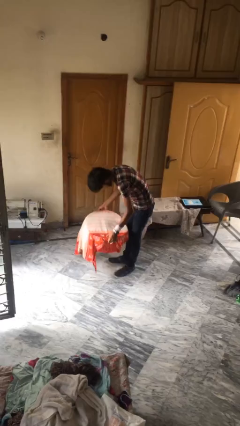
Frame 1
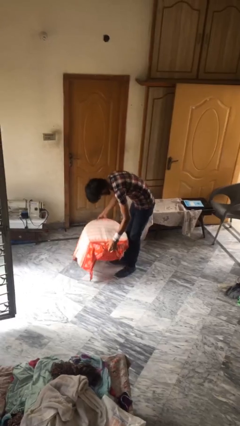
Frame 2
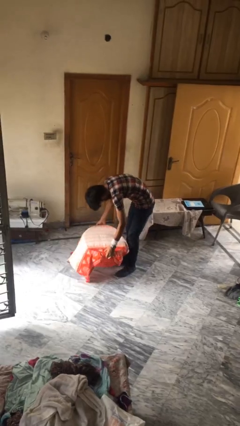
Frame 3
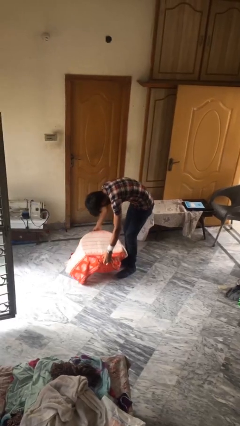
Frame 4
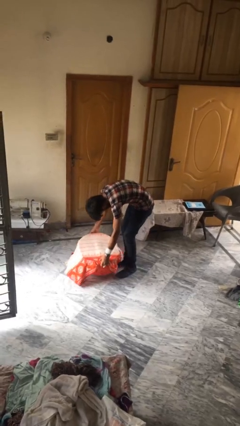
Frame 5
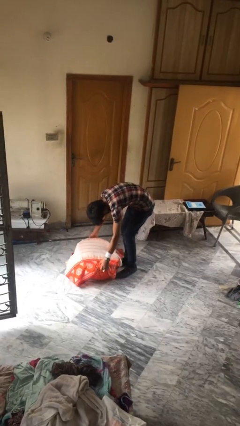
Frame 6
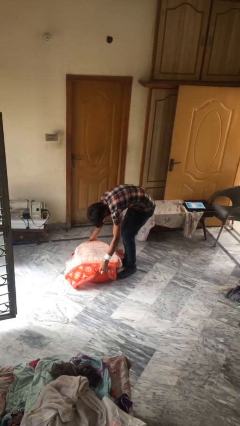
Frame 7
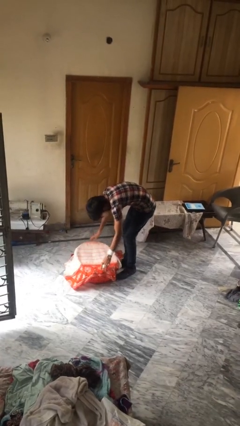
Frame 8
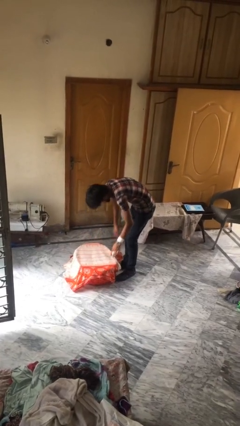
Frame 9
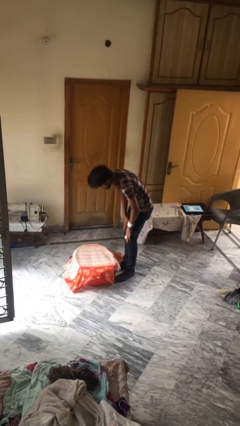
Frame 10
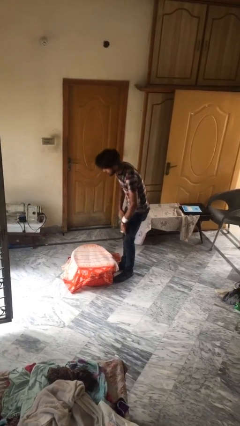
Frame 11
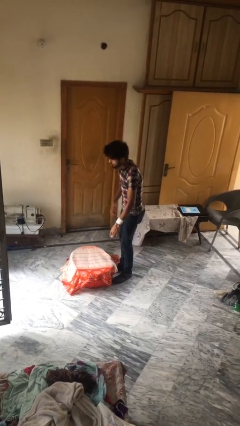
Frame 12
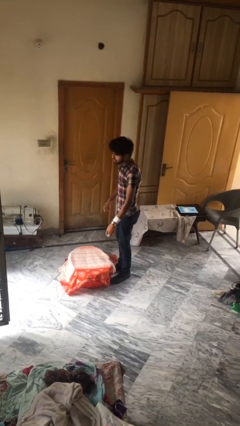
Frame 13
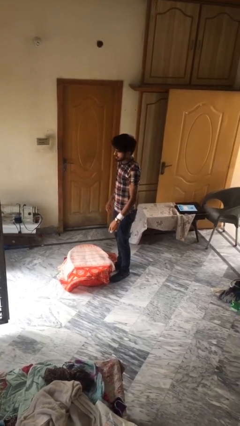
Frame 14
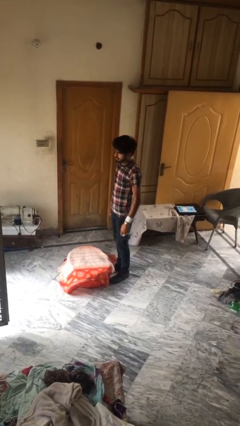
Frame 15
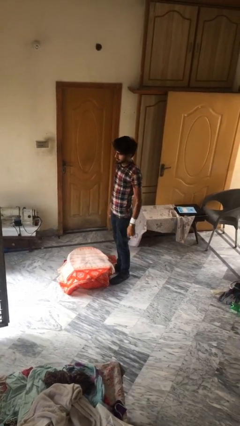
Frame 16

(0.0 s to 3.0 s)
person puts down object on floor

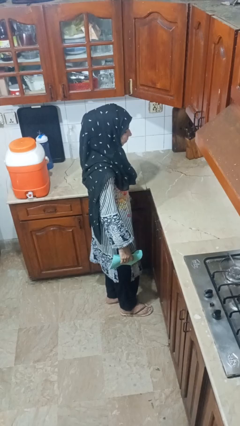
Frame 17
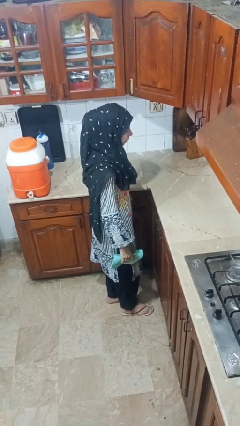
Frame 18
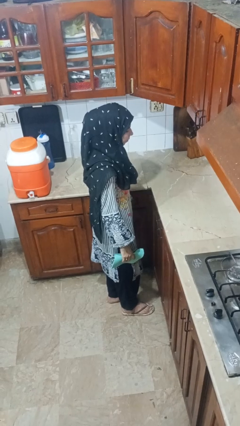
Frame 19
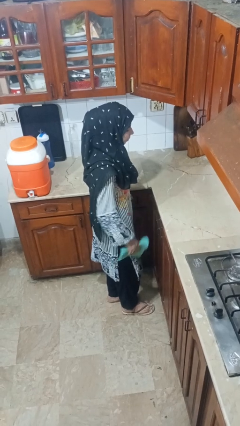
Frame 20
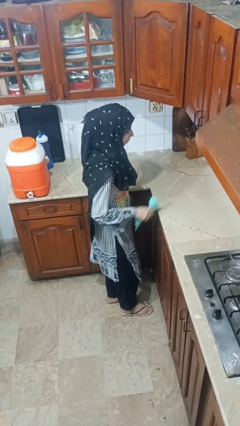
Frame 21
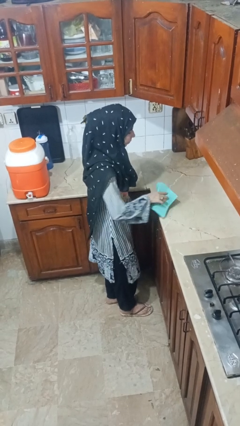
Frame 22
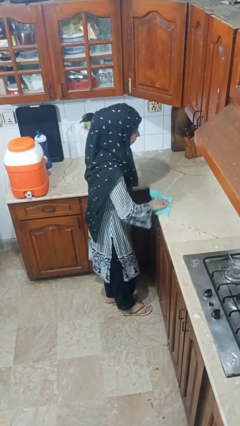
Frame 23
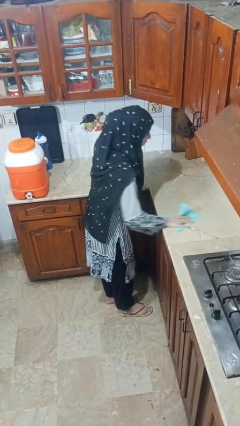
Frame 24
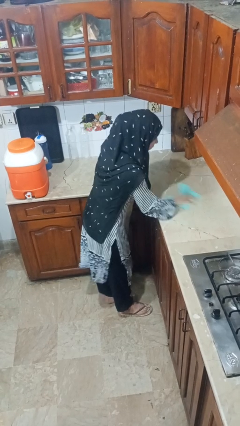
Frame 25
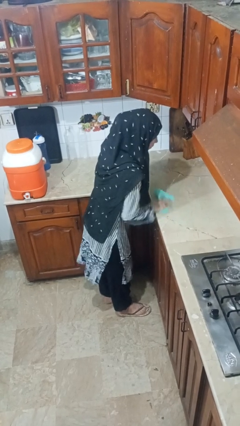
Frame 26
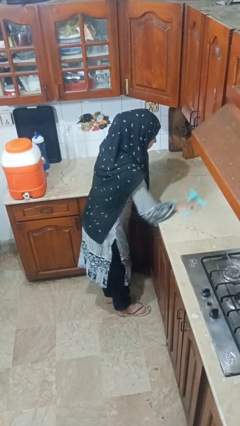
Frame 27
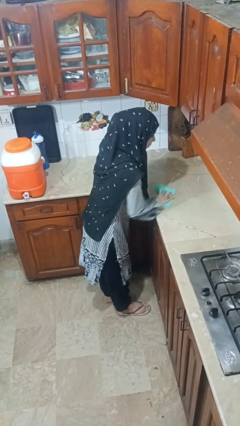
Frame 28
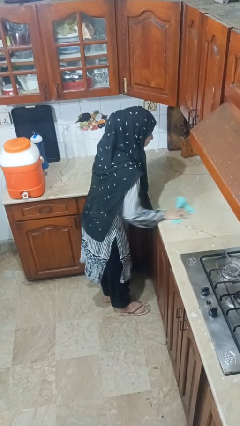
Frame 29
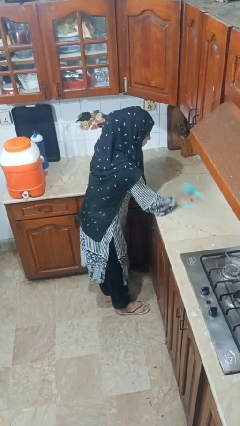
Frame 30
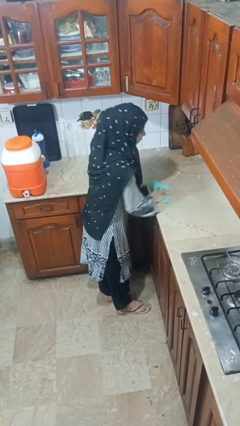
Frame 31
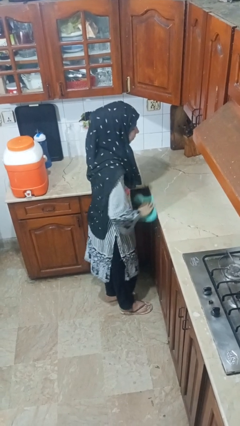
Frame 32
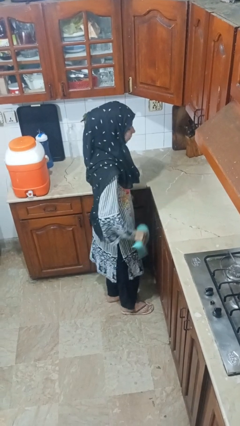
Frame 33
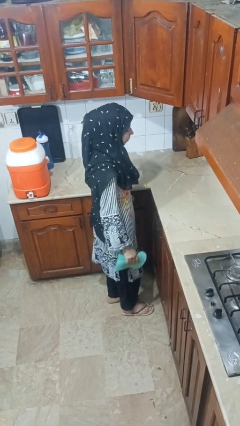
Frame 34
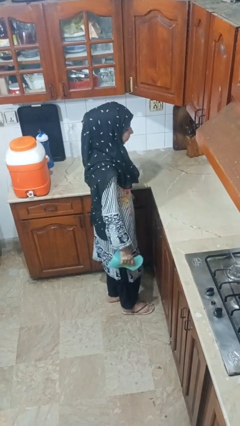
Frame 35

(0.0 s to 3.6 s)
person cleans table with rag

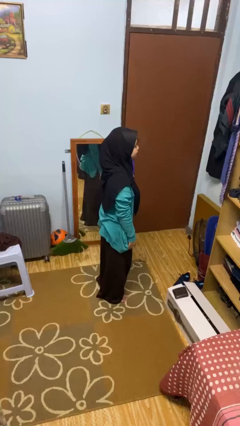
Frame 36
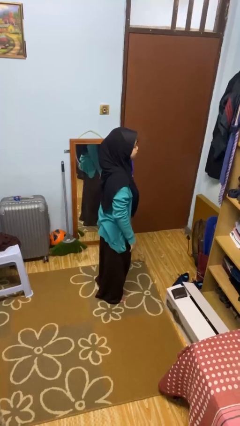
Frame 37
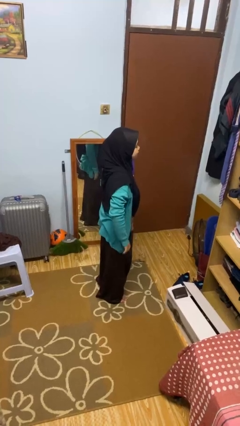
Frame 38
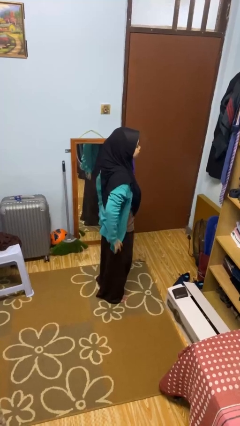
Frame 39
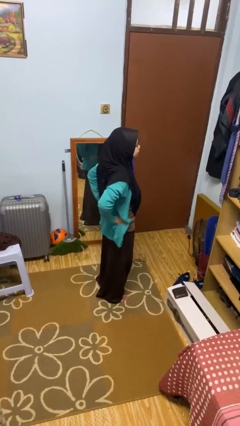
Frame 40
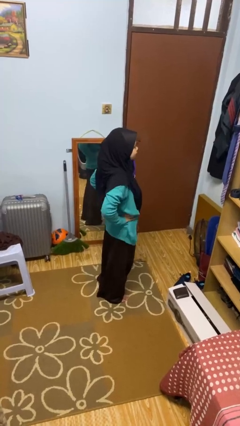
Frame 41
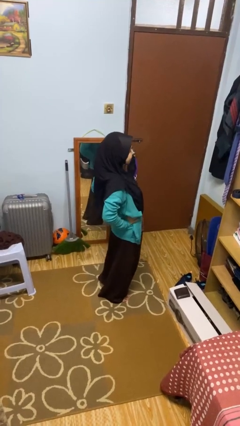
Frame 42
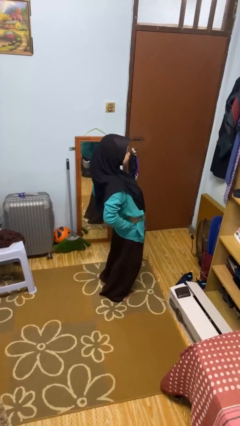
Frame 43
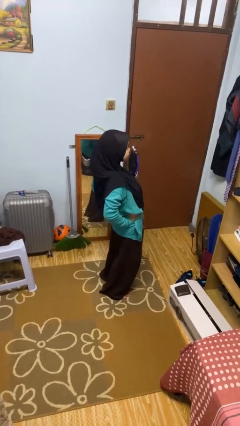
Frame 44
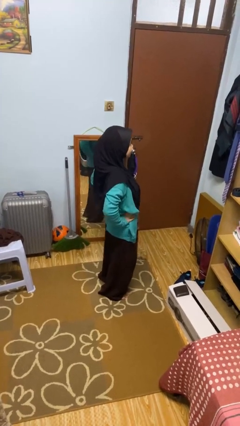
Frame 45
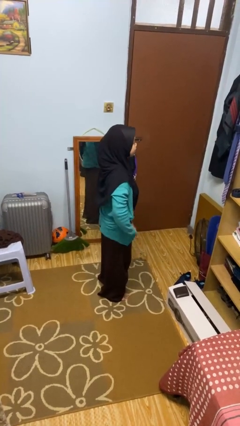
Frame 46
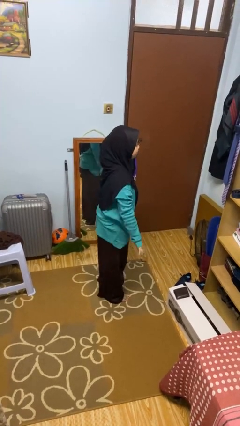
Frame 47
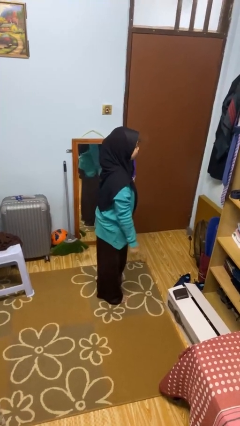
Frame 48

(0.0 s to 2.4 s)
person stretches back

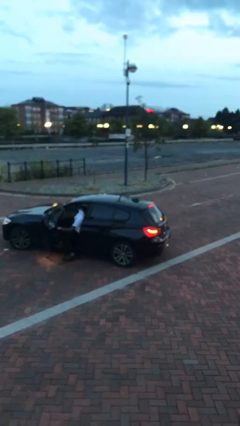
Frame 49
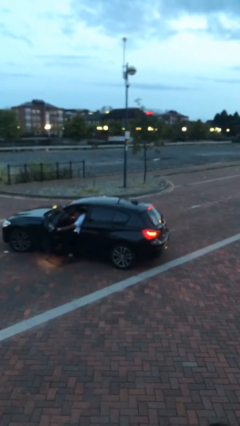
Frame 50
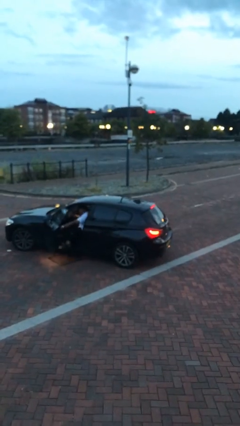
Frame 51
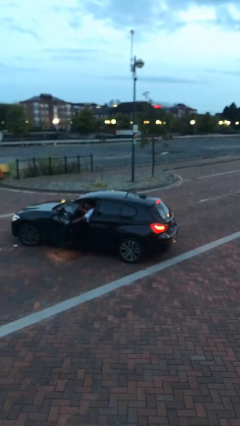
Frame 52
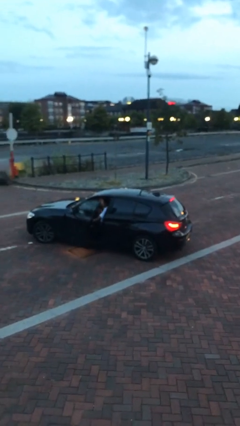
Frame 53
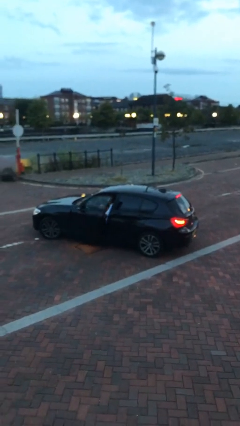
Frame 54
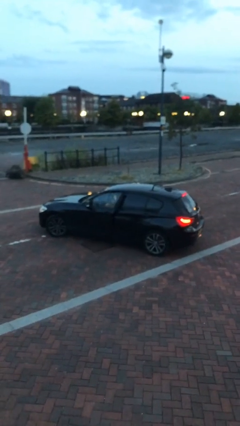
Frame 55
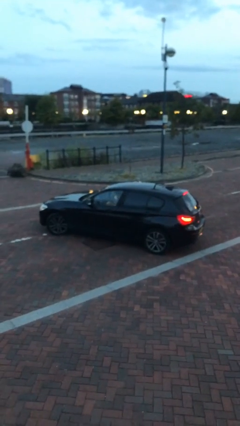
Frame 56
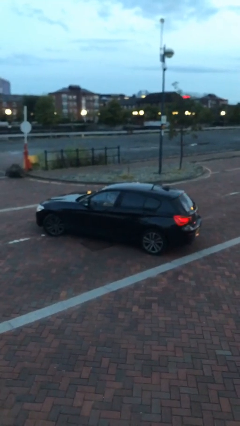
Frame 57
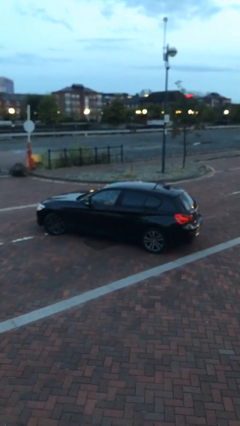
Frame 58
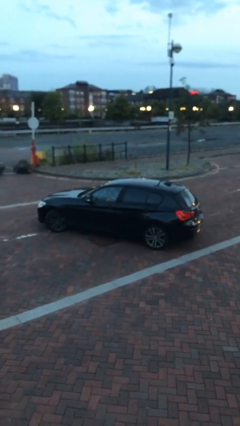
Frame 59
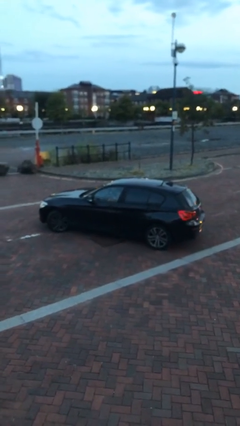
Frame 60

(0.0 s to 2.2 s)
car picks up person

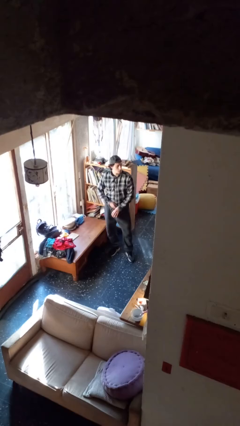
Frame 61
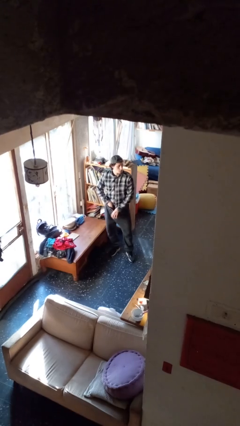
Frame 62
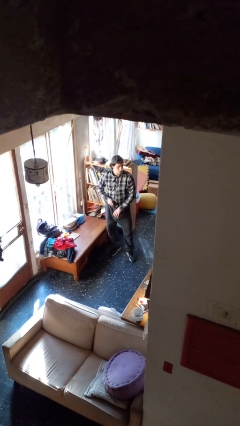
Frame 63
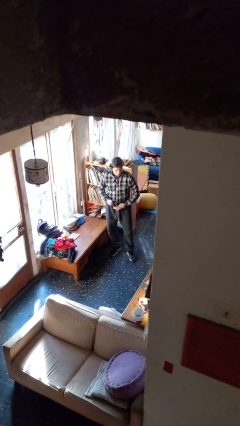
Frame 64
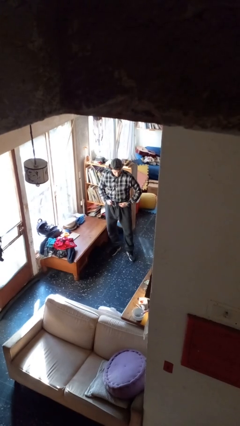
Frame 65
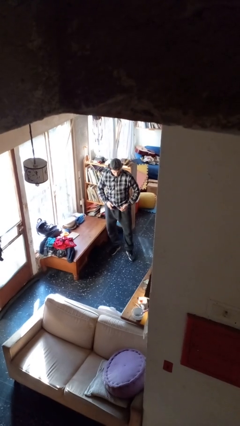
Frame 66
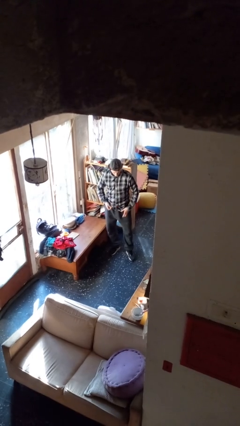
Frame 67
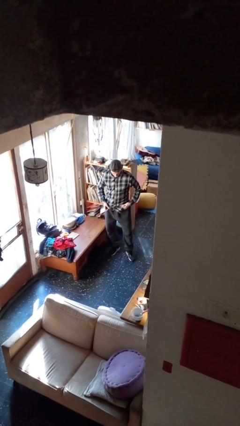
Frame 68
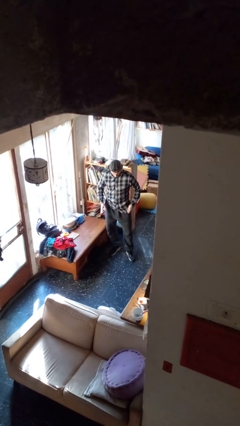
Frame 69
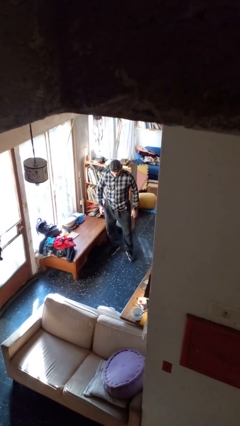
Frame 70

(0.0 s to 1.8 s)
person untucks shirt

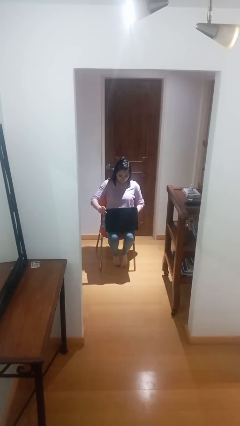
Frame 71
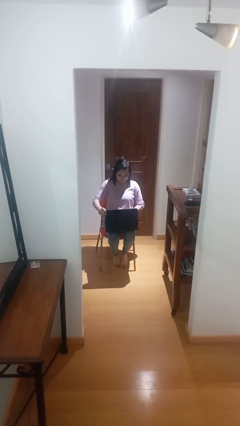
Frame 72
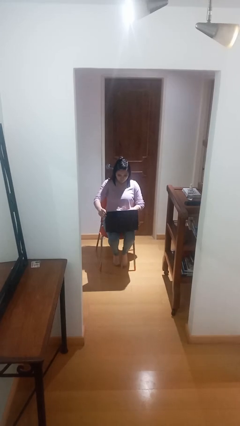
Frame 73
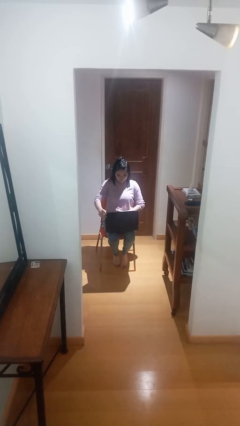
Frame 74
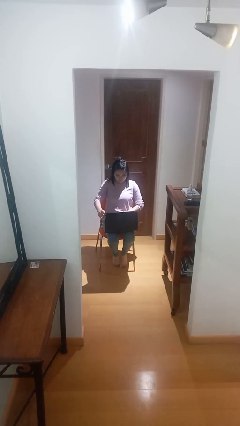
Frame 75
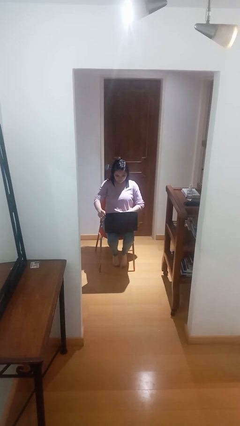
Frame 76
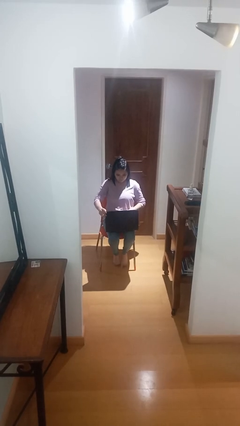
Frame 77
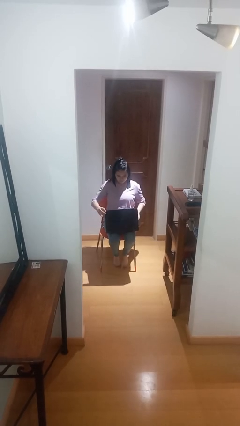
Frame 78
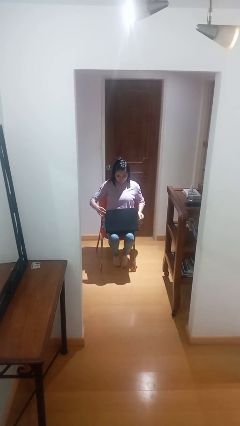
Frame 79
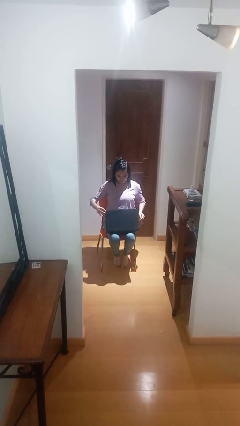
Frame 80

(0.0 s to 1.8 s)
person interacts with laptop

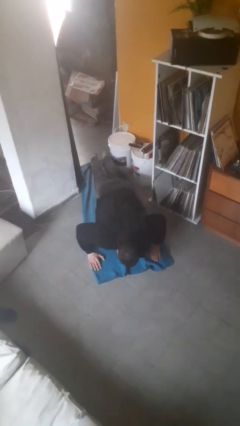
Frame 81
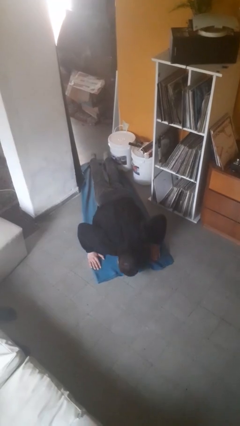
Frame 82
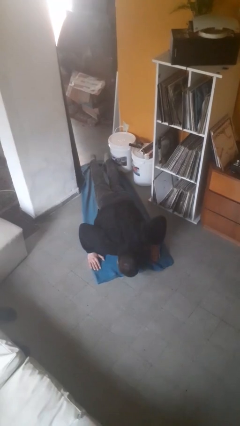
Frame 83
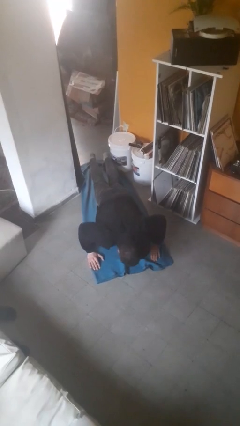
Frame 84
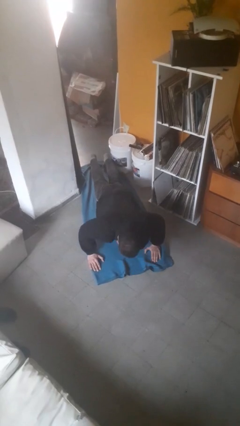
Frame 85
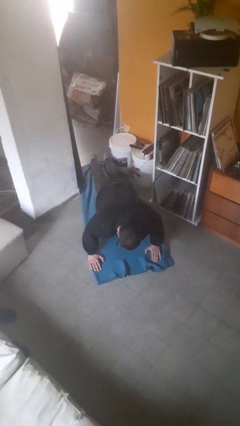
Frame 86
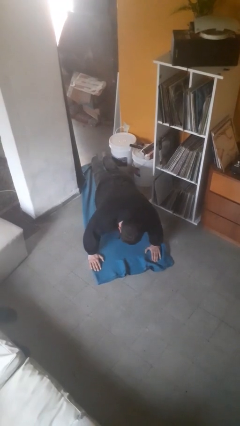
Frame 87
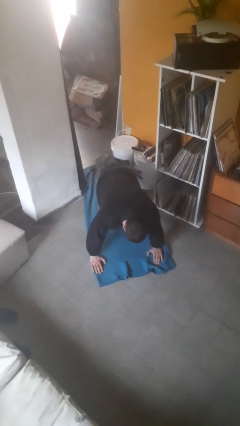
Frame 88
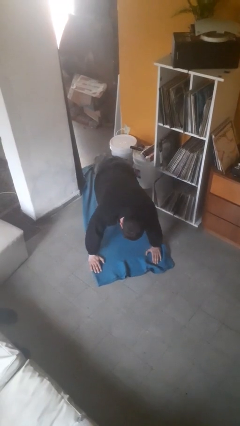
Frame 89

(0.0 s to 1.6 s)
person exercises with pushup

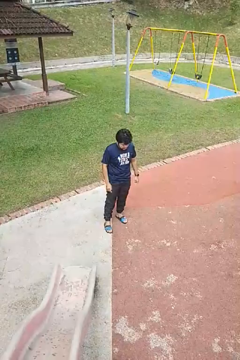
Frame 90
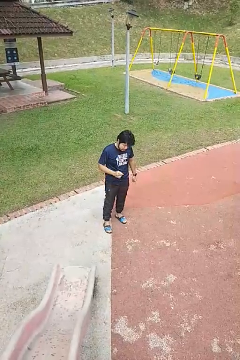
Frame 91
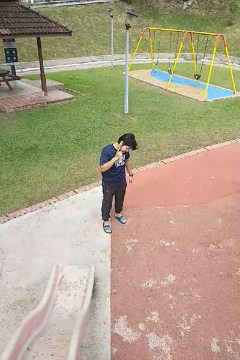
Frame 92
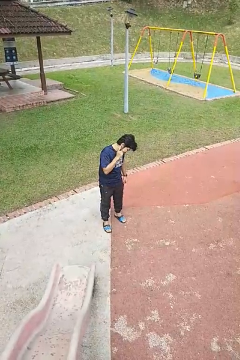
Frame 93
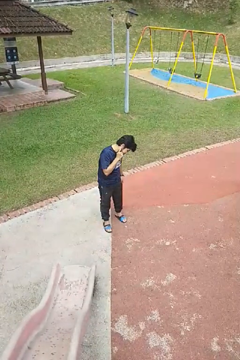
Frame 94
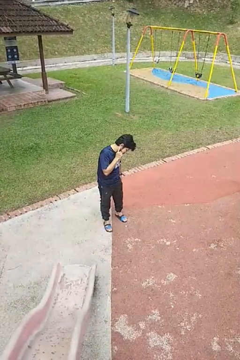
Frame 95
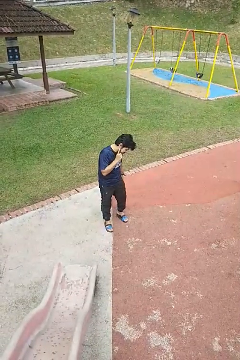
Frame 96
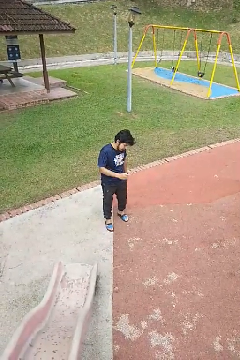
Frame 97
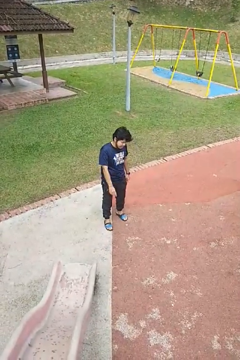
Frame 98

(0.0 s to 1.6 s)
person gestures listen closely
